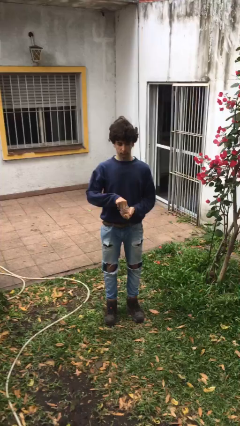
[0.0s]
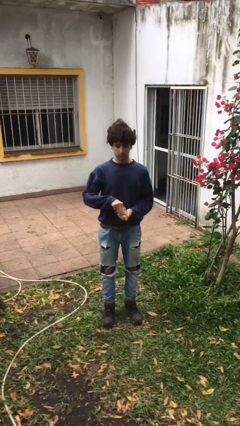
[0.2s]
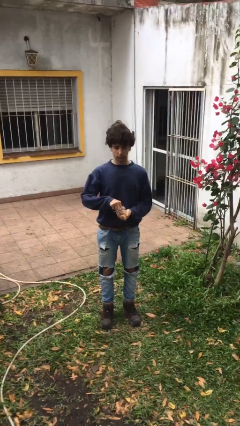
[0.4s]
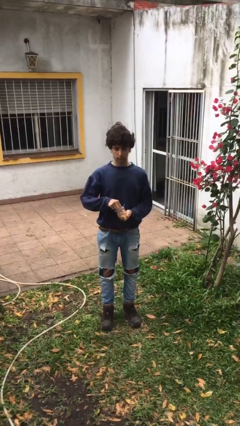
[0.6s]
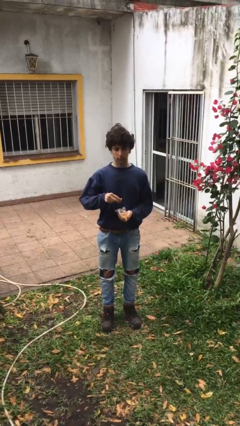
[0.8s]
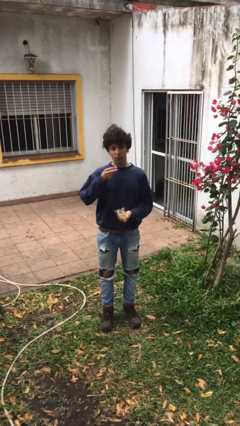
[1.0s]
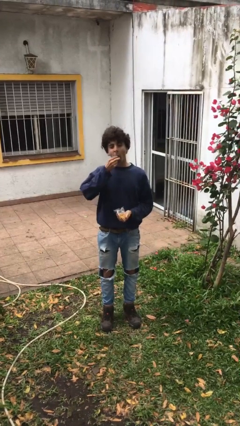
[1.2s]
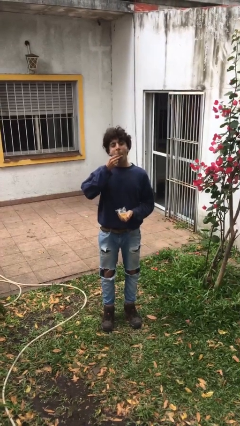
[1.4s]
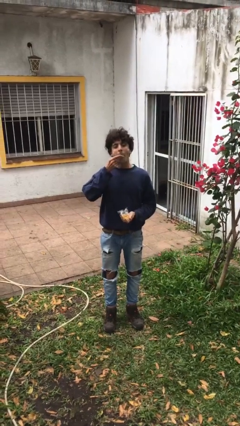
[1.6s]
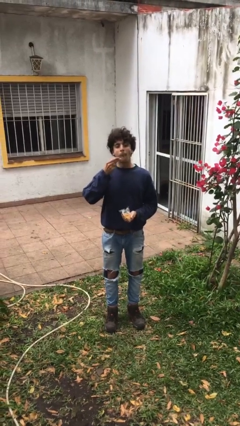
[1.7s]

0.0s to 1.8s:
person eats snack from bag

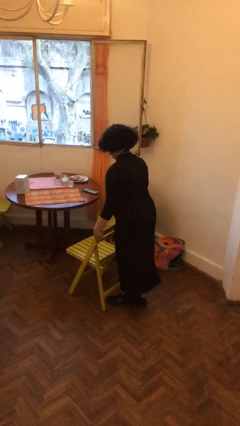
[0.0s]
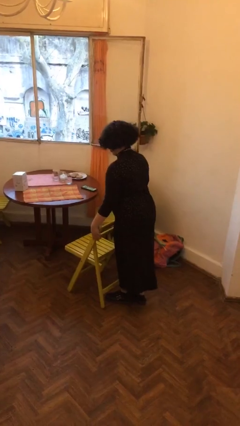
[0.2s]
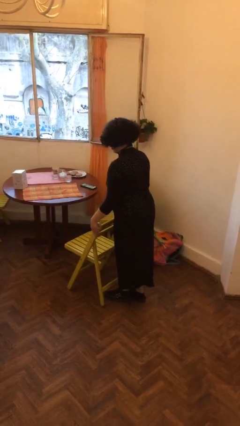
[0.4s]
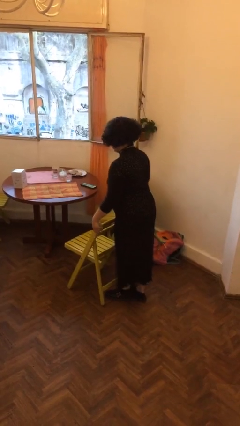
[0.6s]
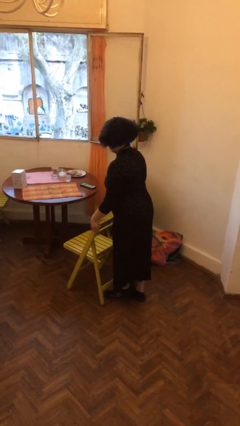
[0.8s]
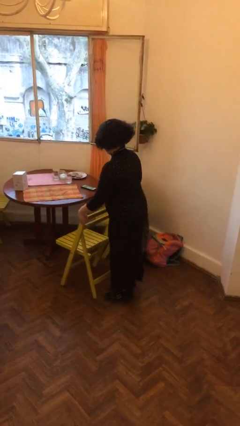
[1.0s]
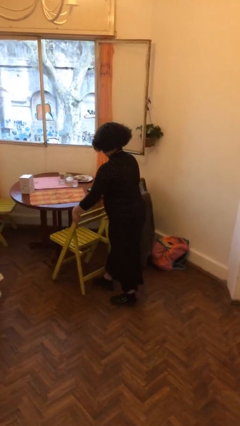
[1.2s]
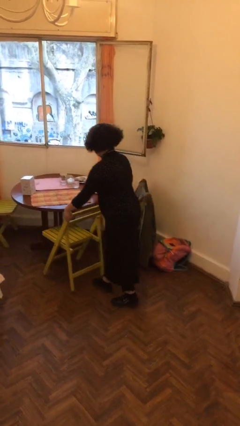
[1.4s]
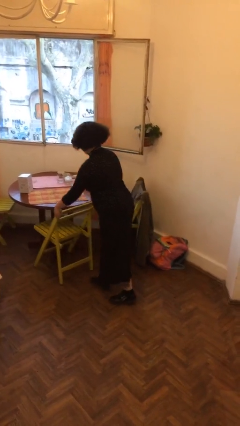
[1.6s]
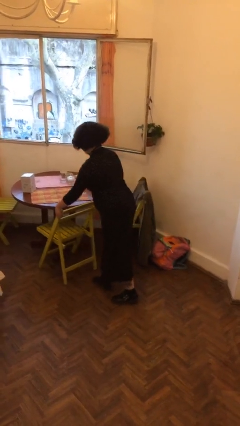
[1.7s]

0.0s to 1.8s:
person pushes in chair

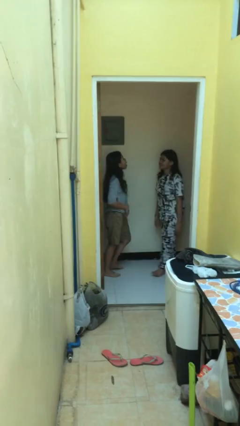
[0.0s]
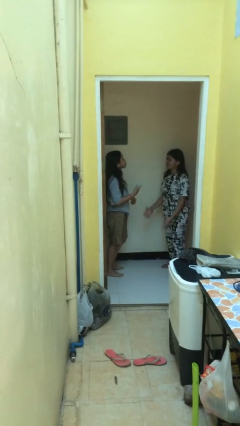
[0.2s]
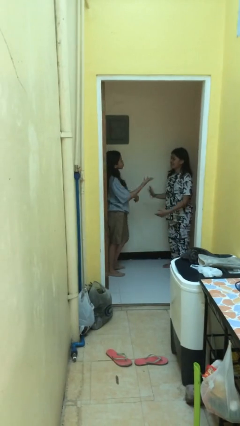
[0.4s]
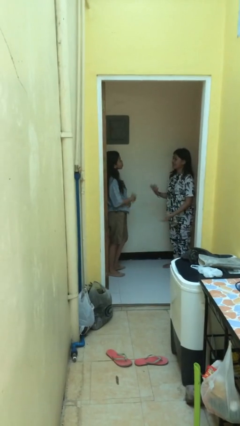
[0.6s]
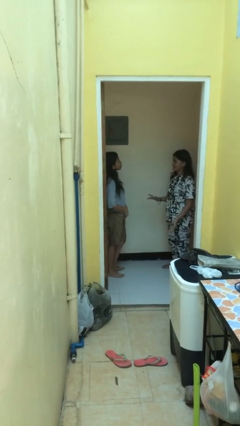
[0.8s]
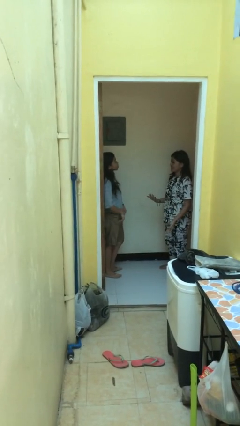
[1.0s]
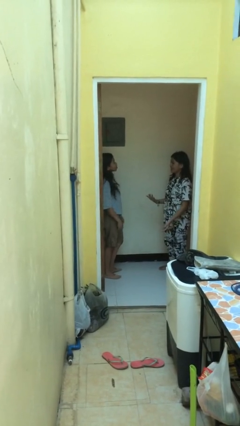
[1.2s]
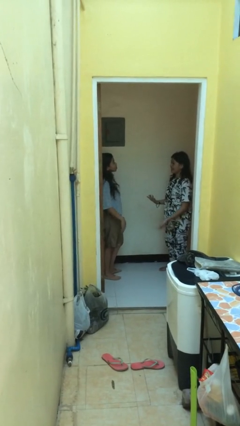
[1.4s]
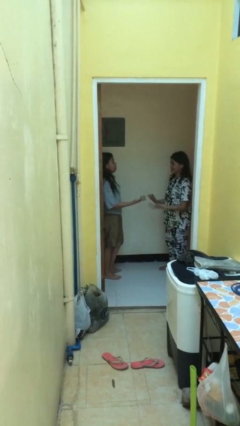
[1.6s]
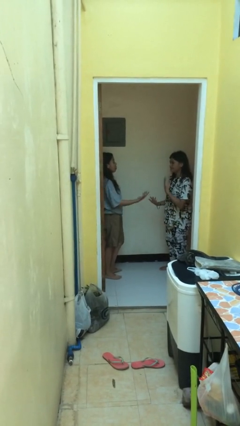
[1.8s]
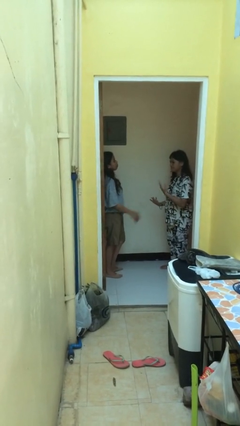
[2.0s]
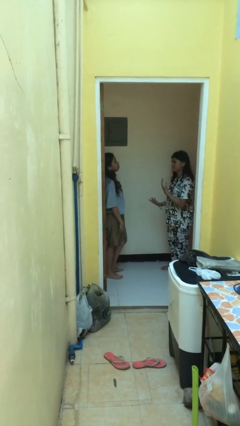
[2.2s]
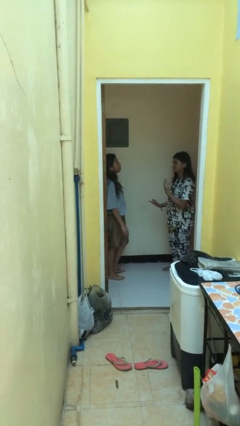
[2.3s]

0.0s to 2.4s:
person talks to person

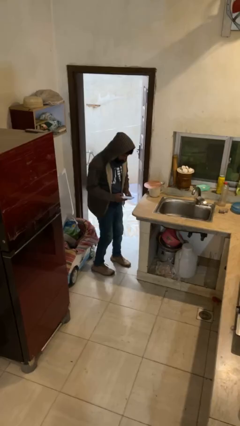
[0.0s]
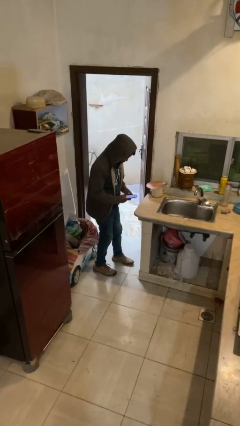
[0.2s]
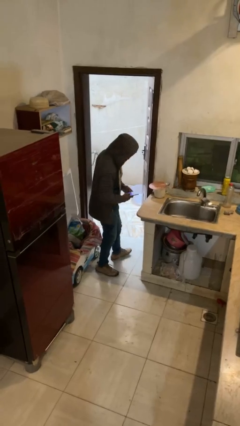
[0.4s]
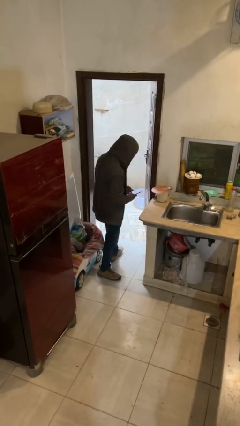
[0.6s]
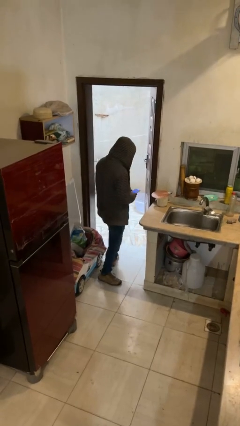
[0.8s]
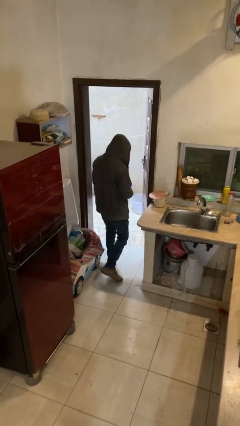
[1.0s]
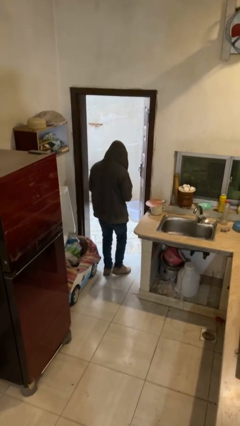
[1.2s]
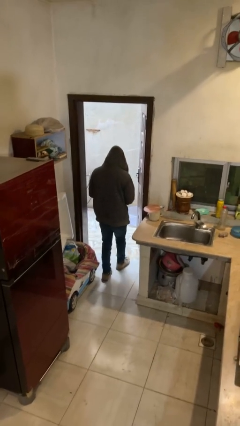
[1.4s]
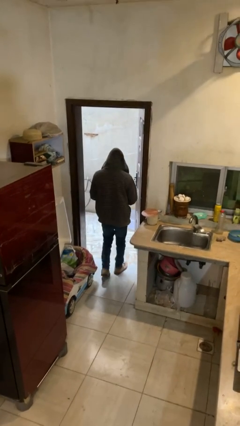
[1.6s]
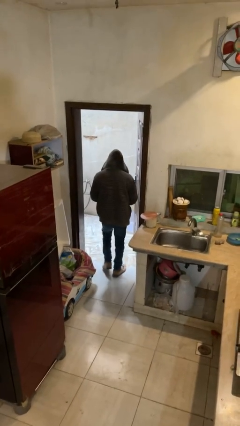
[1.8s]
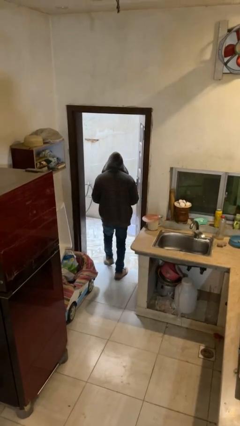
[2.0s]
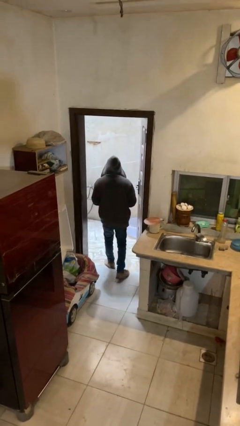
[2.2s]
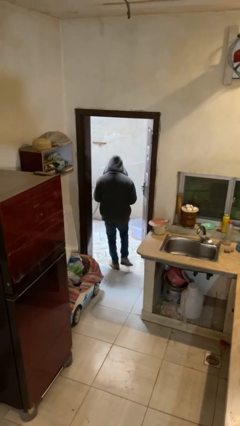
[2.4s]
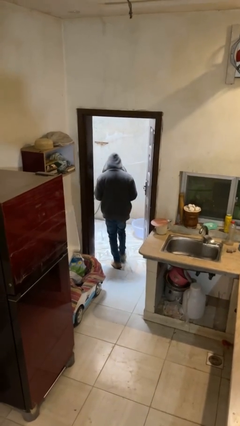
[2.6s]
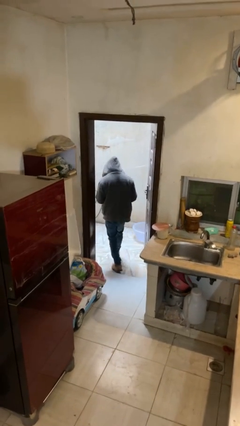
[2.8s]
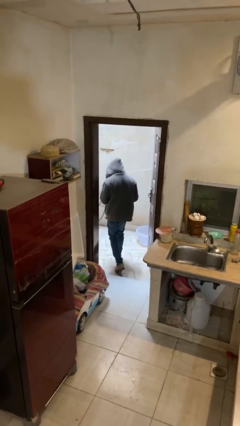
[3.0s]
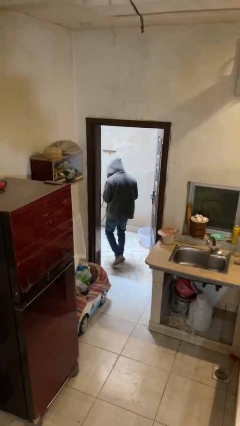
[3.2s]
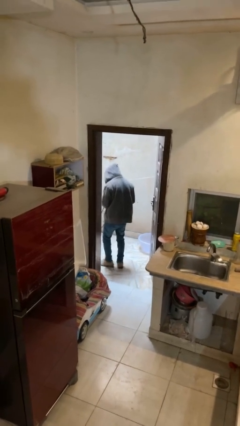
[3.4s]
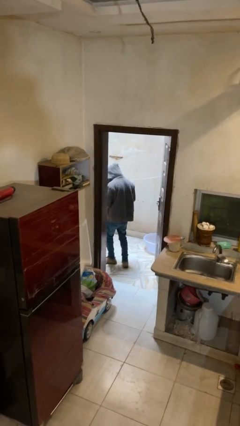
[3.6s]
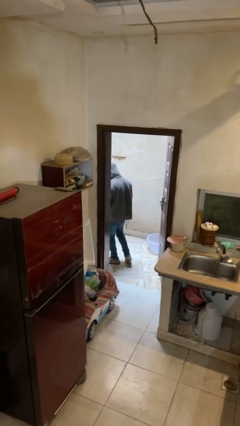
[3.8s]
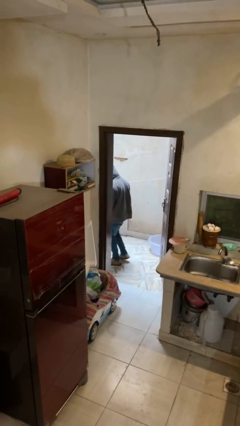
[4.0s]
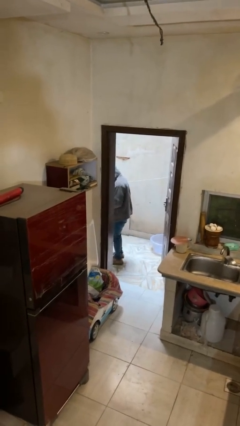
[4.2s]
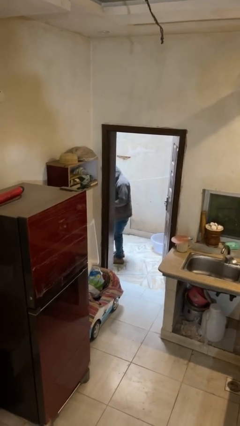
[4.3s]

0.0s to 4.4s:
person exits scene through structure

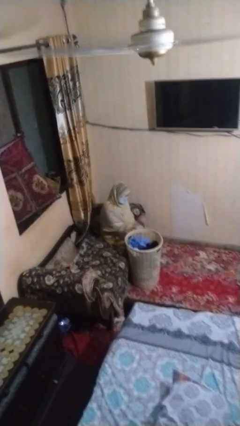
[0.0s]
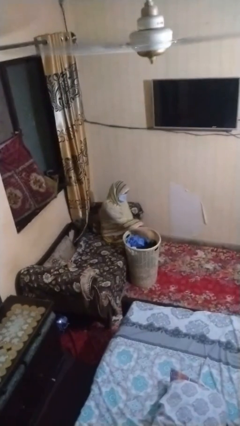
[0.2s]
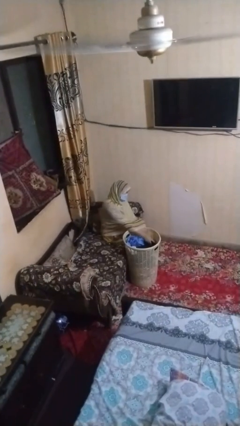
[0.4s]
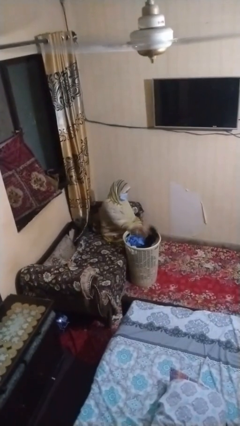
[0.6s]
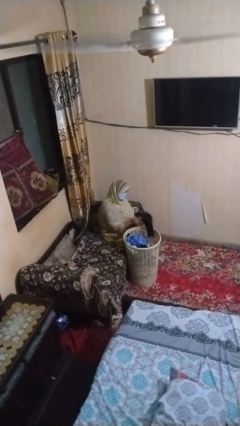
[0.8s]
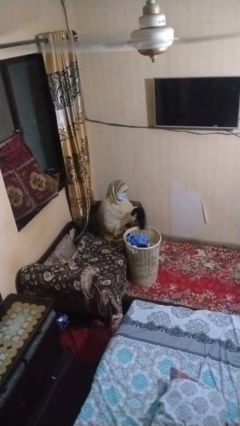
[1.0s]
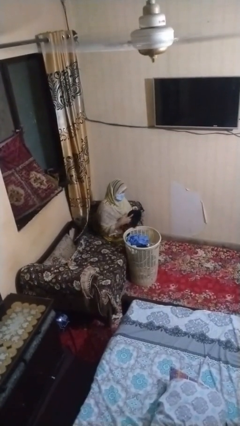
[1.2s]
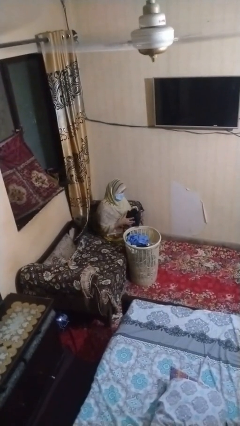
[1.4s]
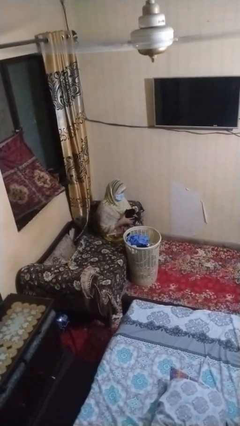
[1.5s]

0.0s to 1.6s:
person takes object from basket

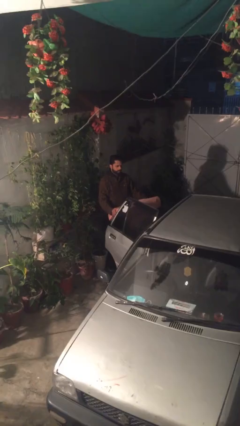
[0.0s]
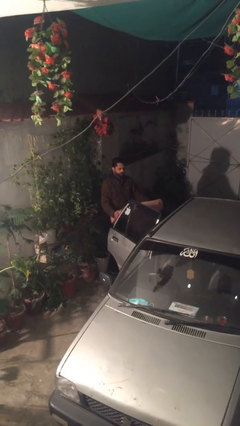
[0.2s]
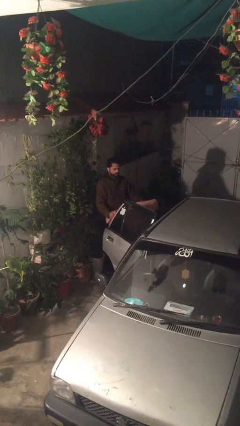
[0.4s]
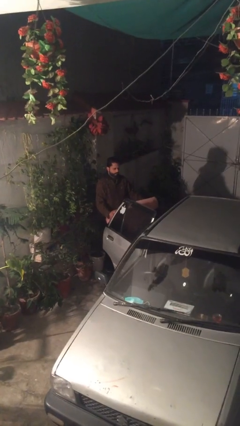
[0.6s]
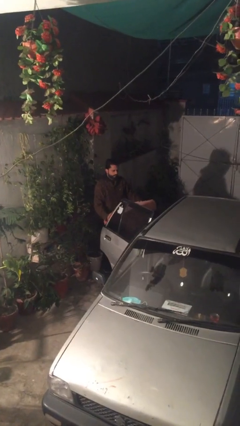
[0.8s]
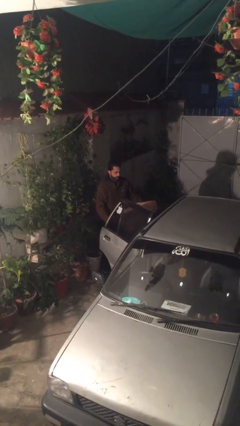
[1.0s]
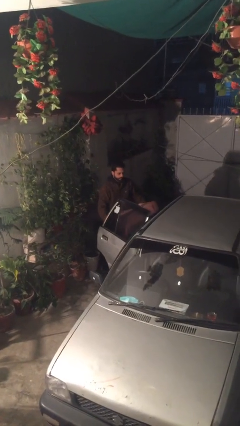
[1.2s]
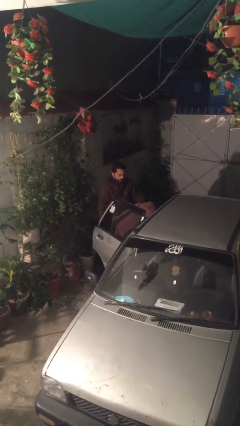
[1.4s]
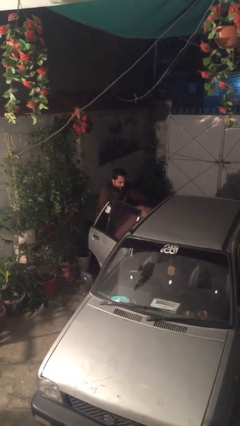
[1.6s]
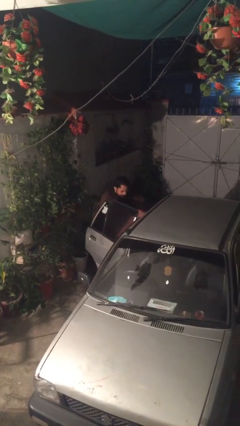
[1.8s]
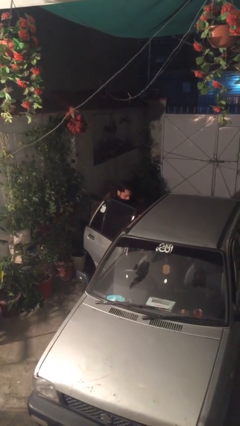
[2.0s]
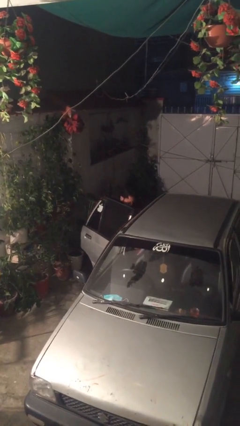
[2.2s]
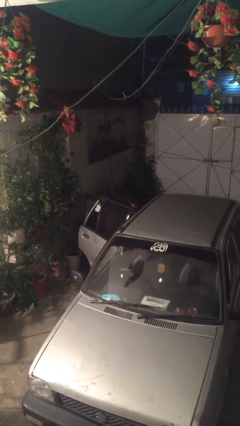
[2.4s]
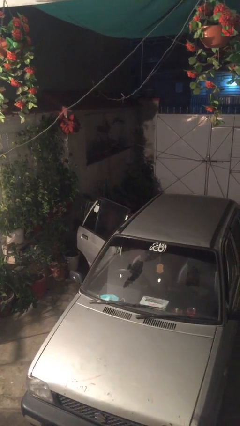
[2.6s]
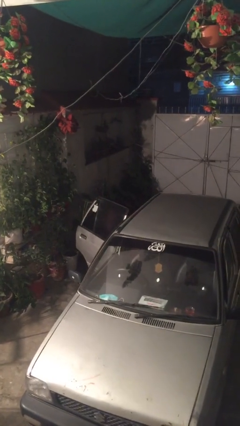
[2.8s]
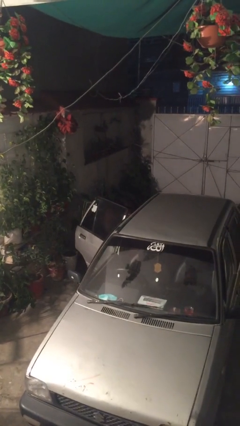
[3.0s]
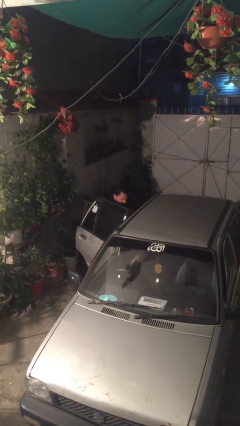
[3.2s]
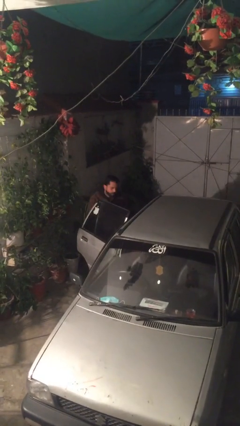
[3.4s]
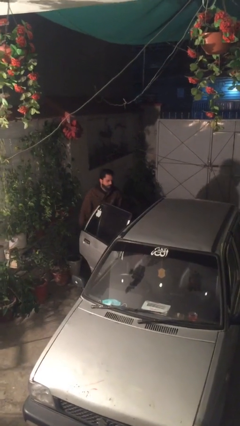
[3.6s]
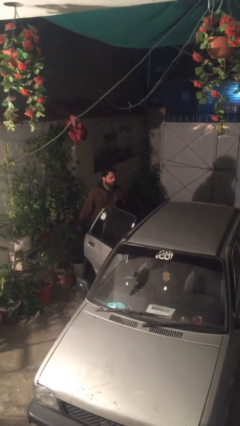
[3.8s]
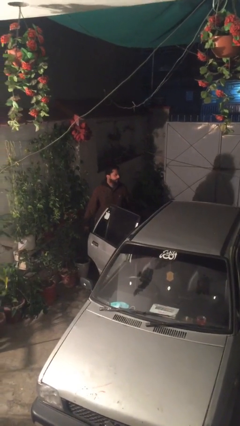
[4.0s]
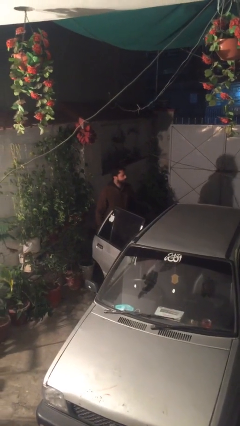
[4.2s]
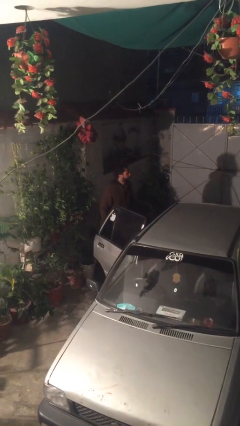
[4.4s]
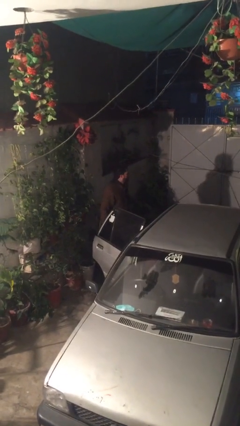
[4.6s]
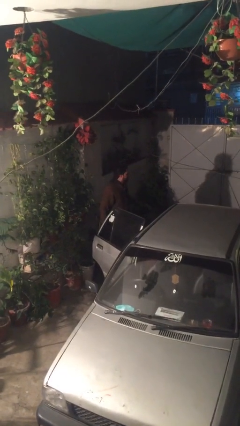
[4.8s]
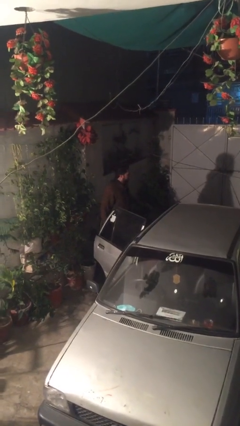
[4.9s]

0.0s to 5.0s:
person loads car
